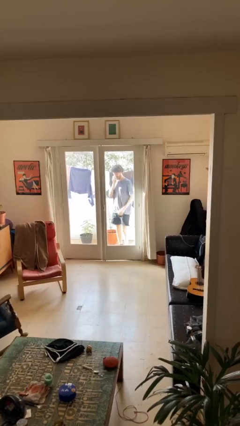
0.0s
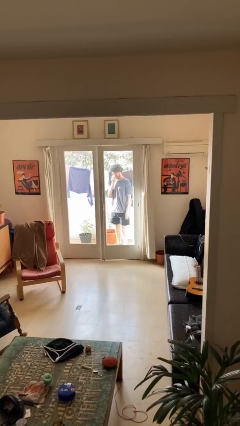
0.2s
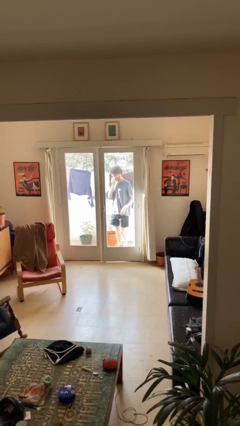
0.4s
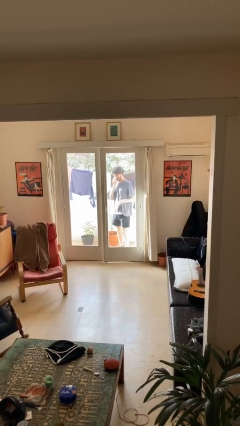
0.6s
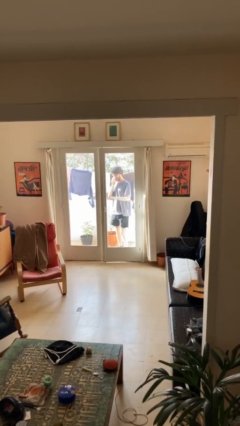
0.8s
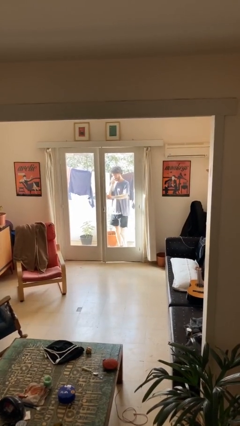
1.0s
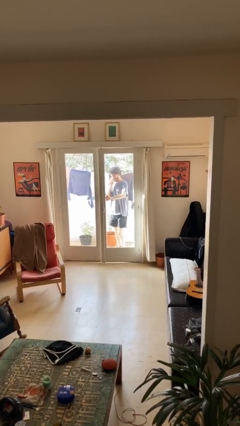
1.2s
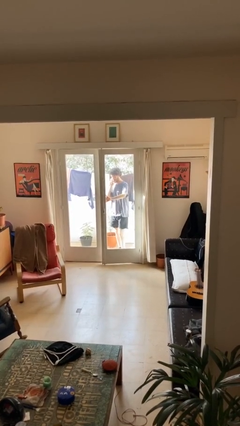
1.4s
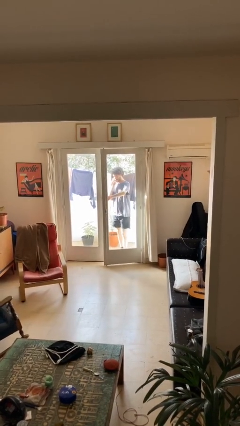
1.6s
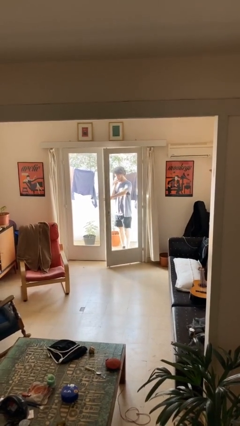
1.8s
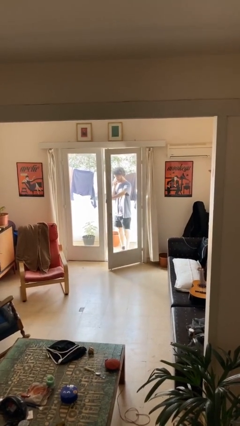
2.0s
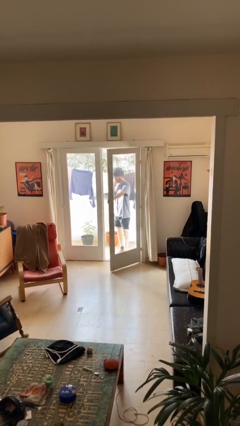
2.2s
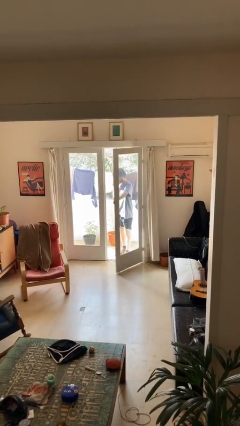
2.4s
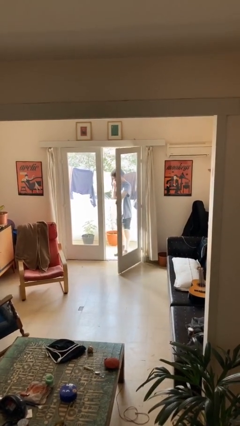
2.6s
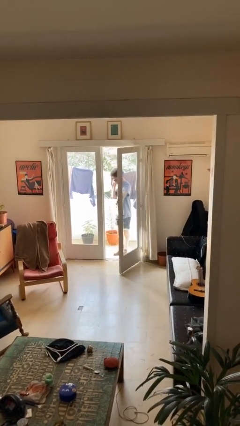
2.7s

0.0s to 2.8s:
person opens facility door

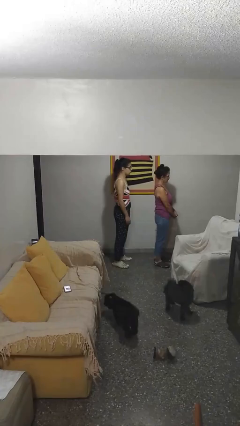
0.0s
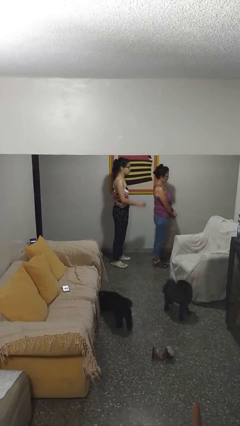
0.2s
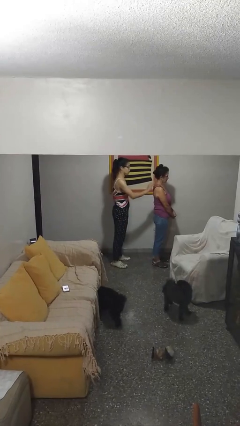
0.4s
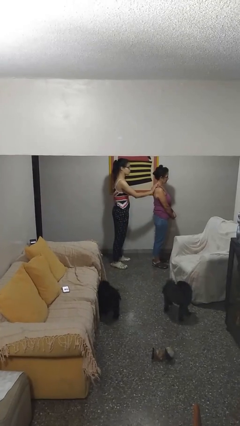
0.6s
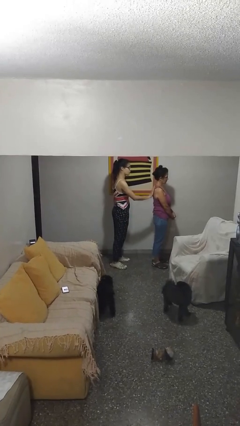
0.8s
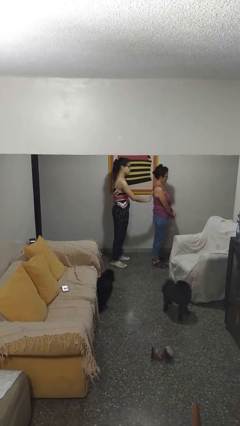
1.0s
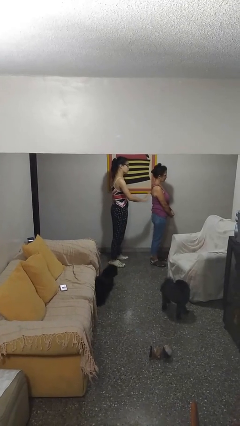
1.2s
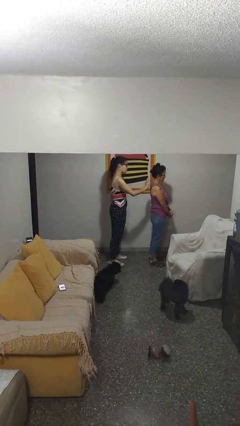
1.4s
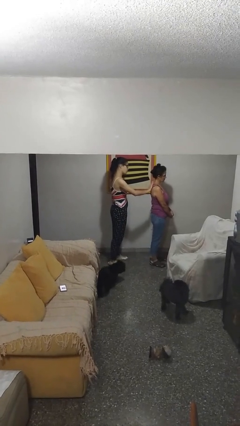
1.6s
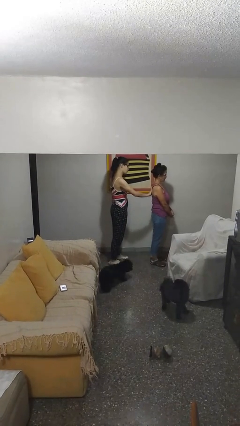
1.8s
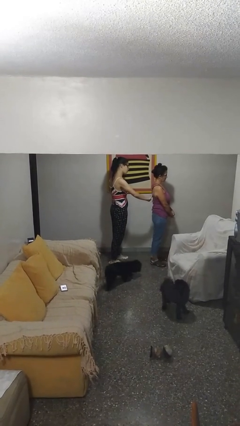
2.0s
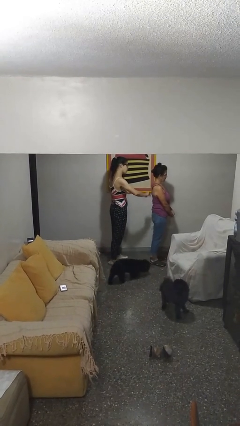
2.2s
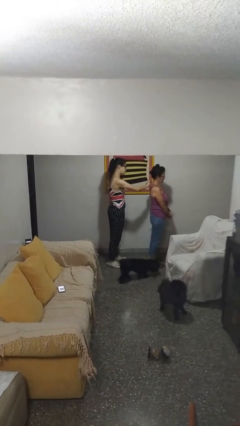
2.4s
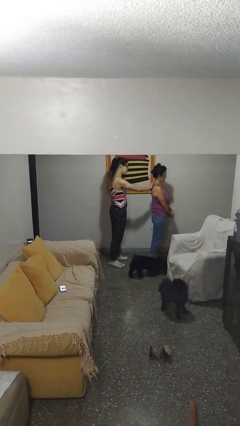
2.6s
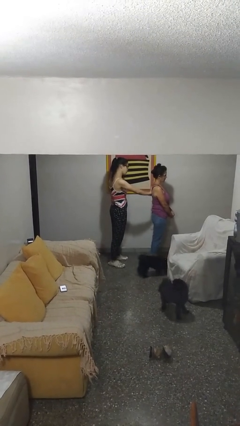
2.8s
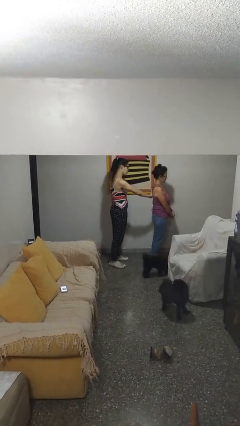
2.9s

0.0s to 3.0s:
person touches back of person

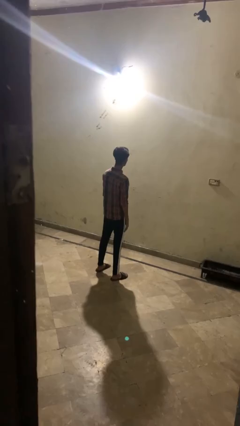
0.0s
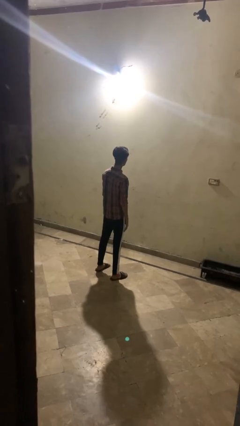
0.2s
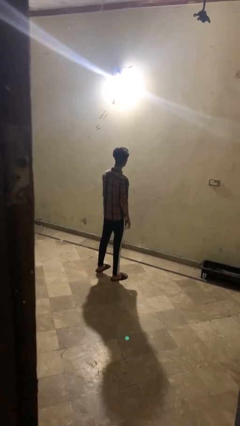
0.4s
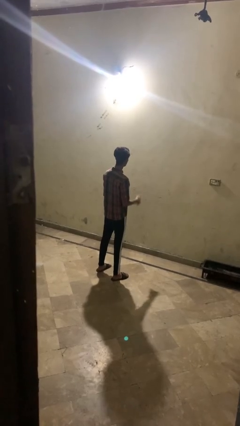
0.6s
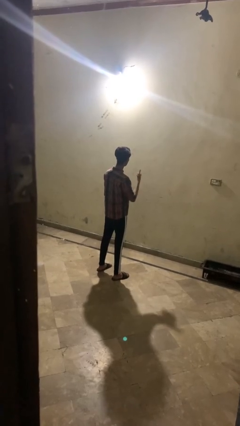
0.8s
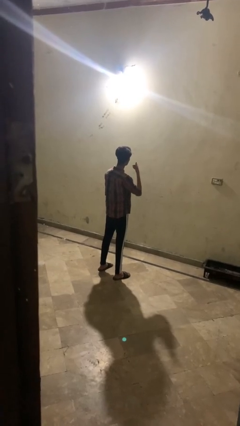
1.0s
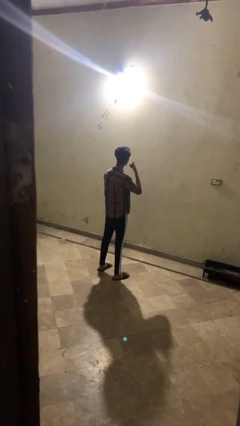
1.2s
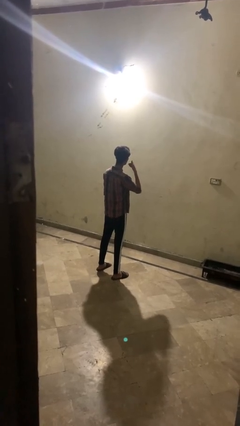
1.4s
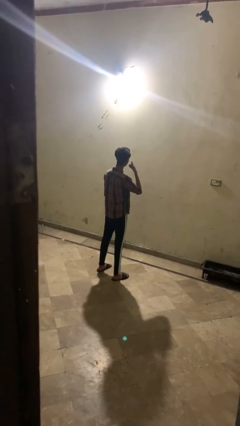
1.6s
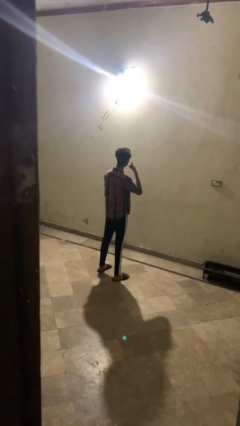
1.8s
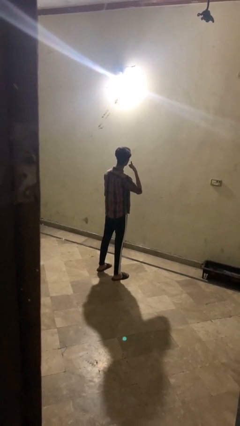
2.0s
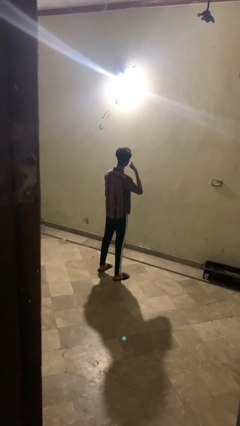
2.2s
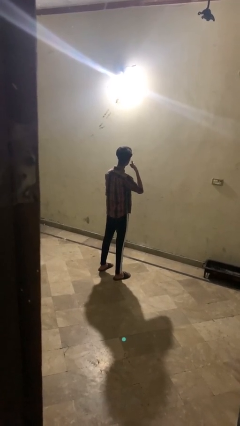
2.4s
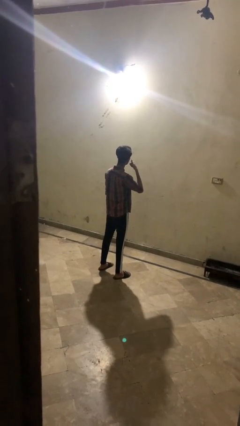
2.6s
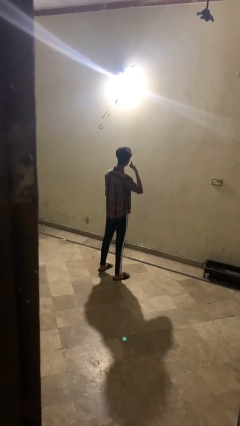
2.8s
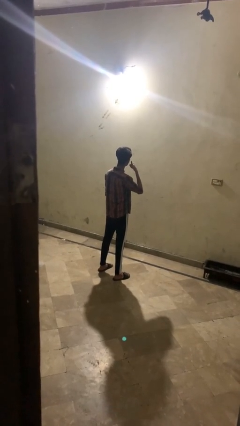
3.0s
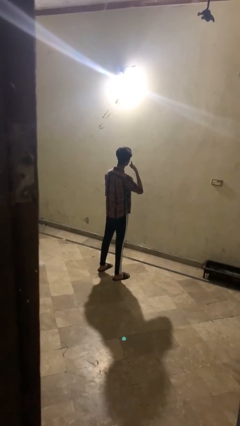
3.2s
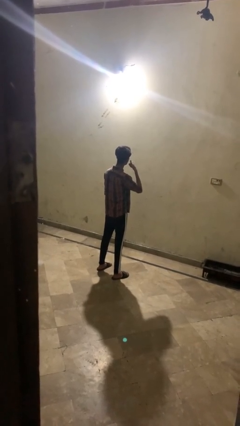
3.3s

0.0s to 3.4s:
person gestures call me

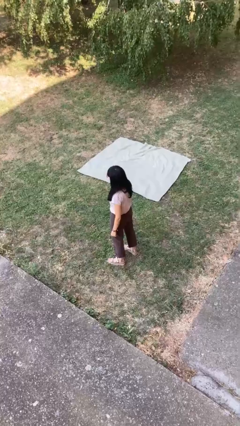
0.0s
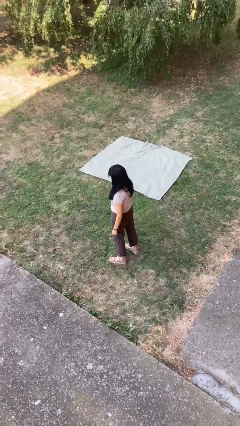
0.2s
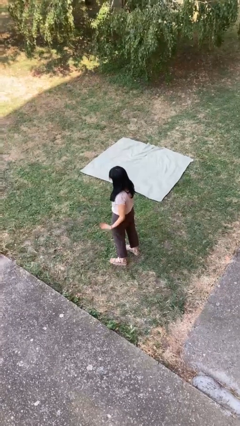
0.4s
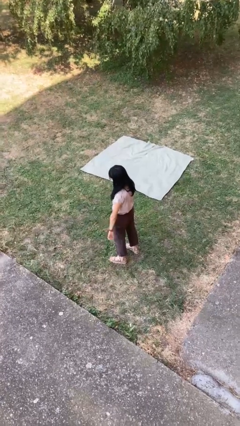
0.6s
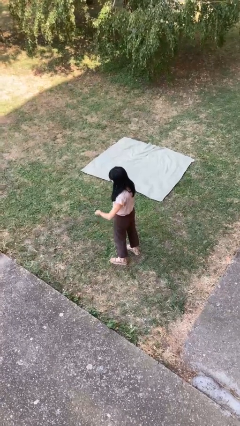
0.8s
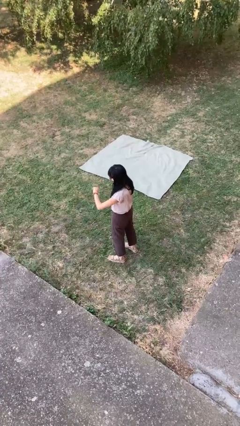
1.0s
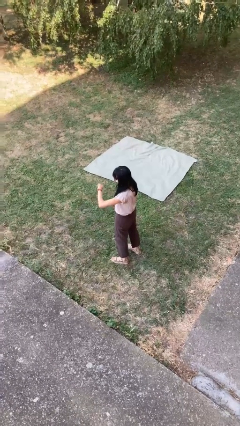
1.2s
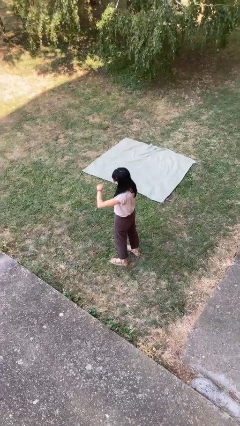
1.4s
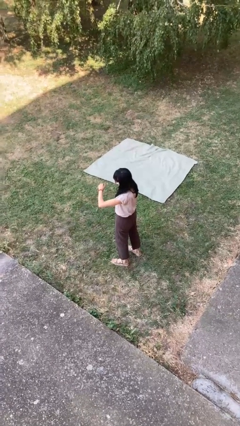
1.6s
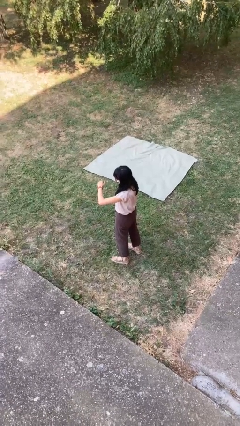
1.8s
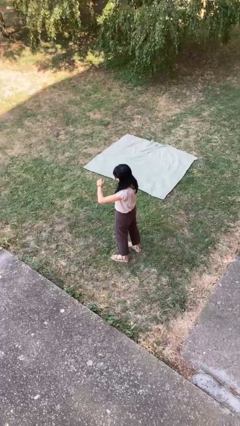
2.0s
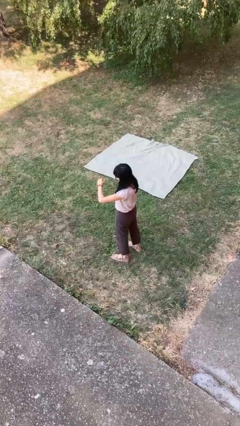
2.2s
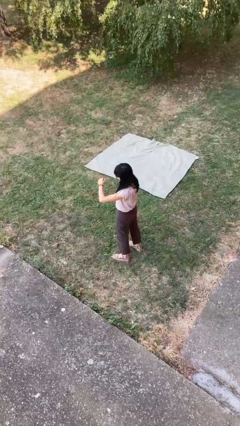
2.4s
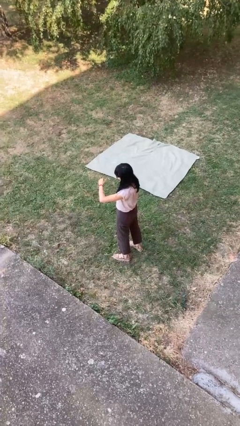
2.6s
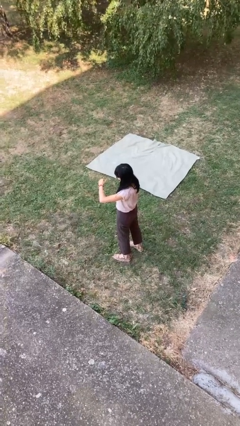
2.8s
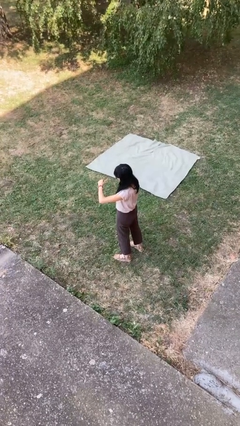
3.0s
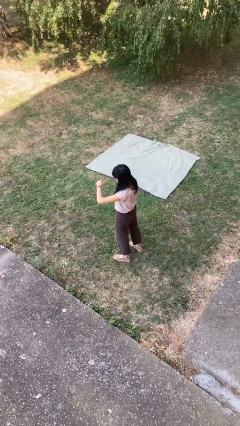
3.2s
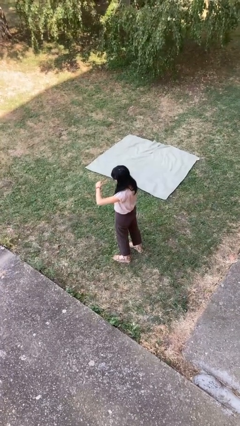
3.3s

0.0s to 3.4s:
person looks at wristwatch

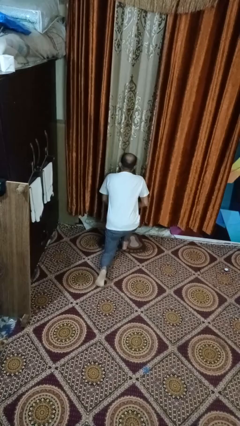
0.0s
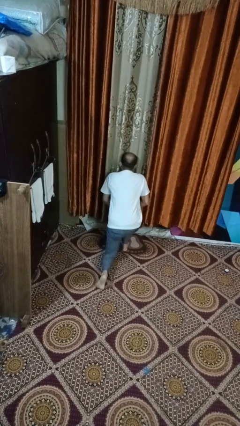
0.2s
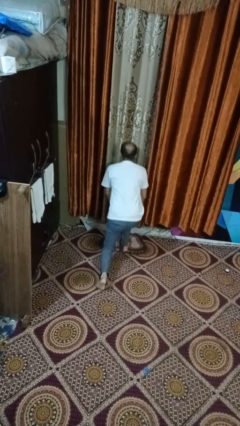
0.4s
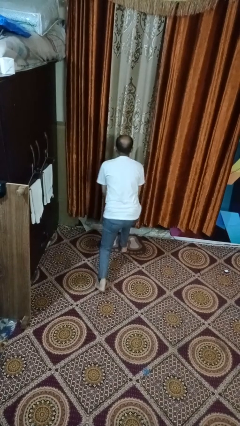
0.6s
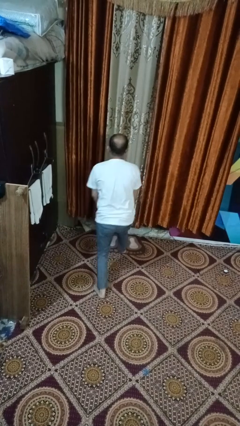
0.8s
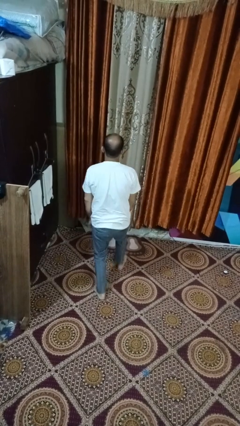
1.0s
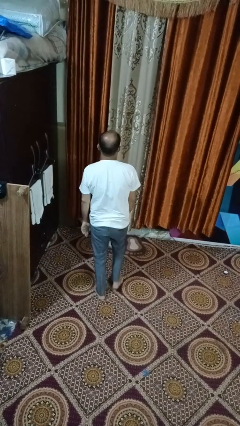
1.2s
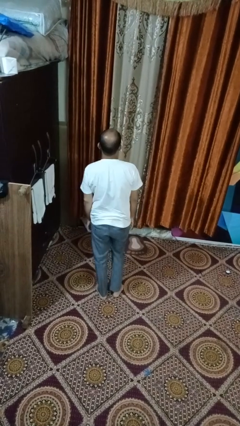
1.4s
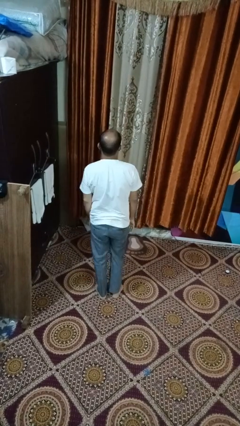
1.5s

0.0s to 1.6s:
person stands up from floor

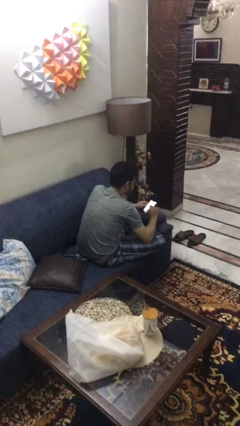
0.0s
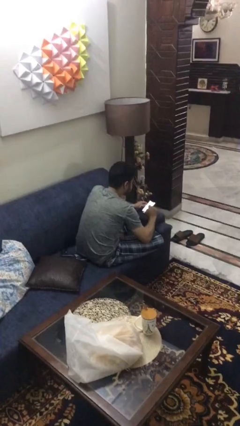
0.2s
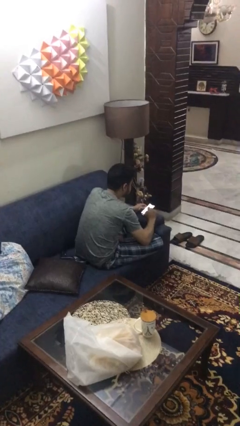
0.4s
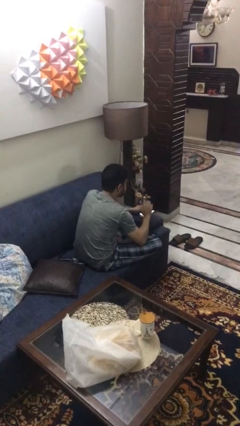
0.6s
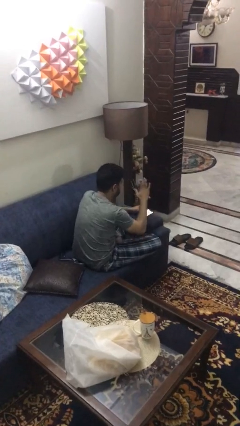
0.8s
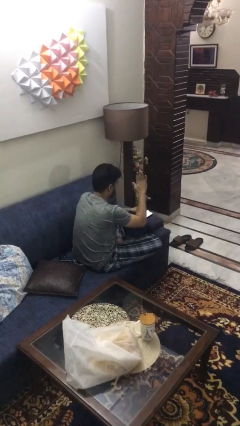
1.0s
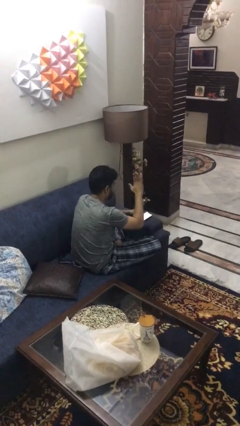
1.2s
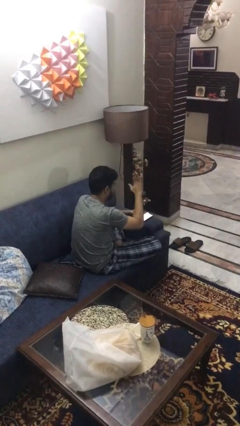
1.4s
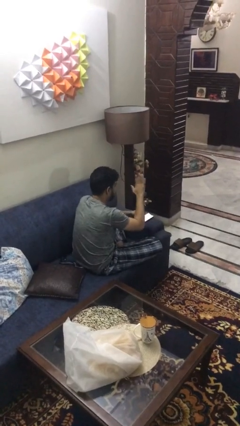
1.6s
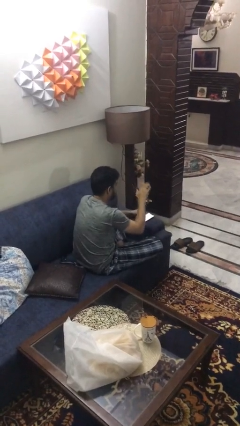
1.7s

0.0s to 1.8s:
person gestures stop

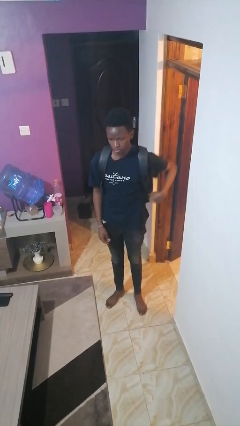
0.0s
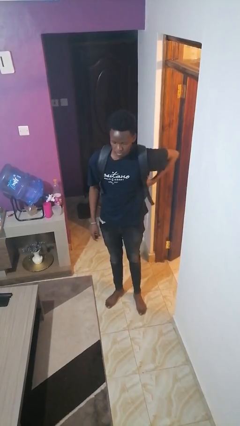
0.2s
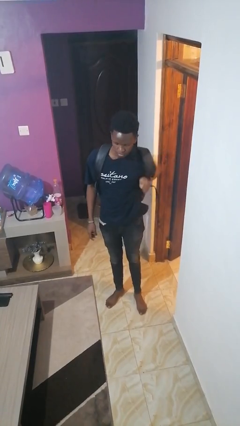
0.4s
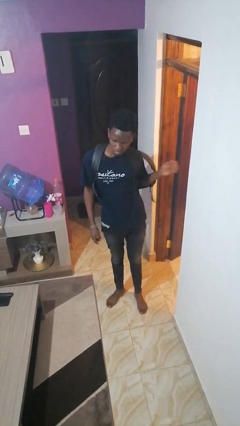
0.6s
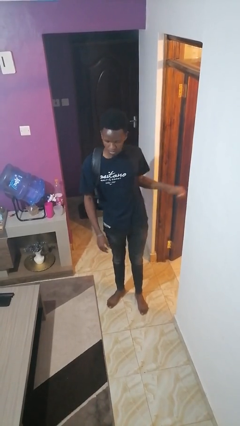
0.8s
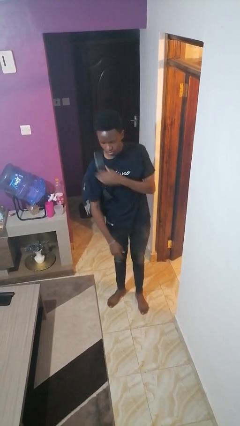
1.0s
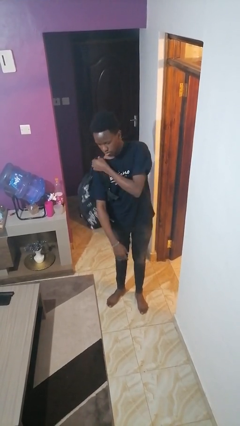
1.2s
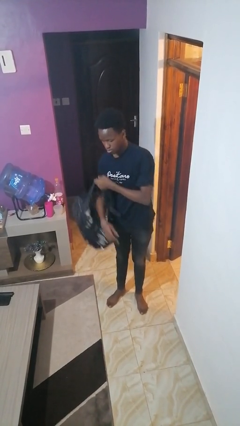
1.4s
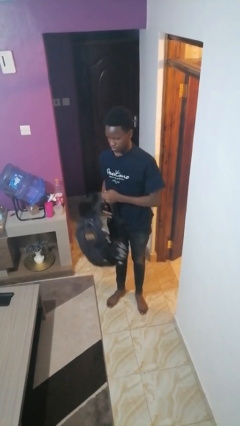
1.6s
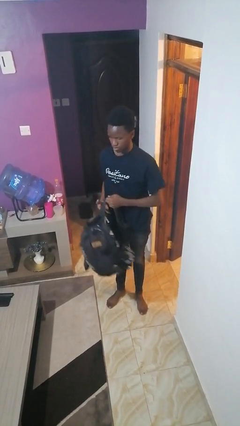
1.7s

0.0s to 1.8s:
person takes off backpack
